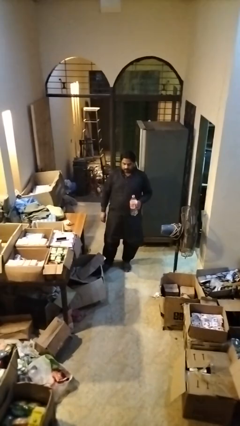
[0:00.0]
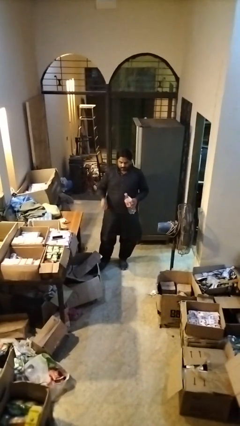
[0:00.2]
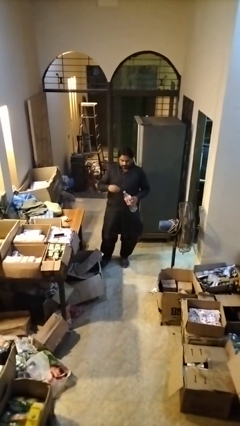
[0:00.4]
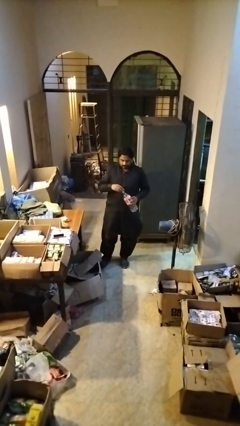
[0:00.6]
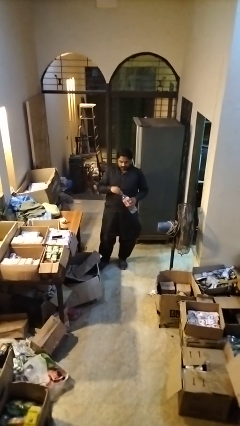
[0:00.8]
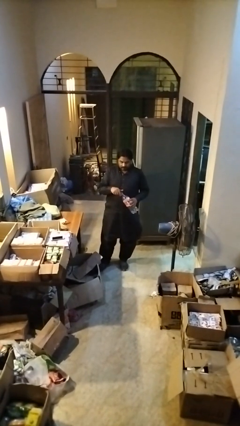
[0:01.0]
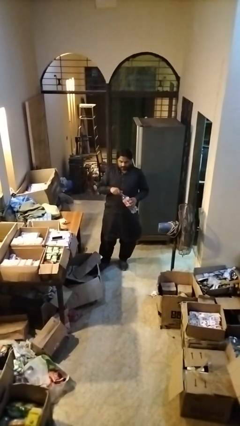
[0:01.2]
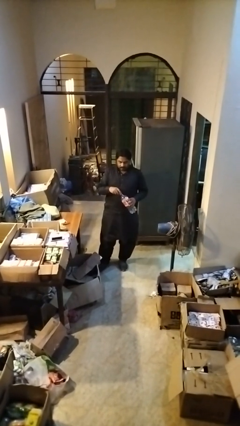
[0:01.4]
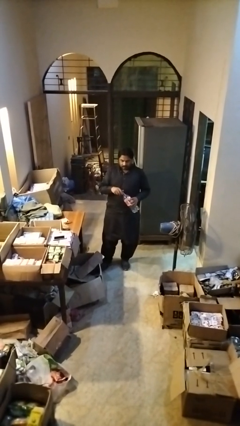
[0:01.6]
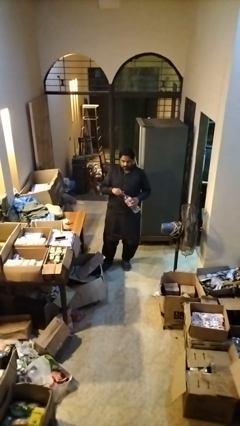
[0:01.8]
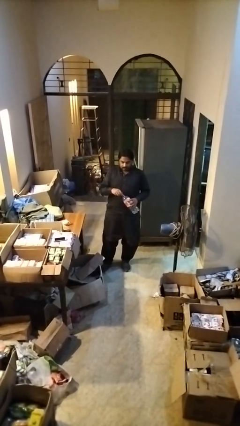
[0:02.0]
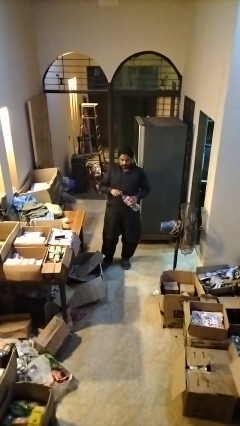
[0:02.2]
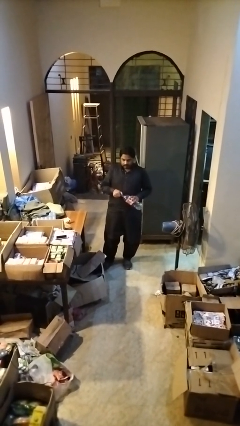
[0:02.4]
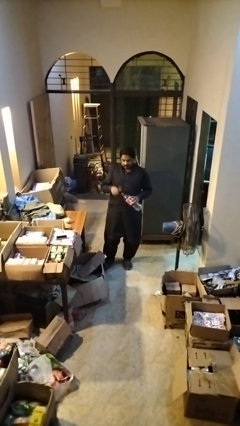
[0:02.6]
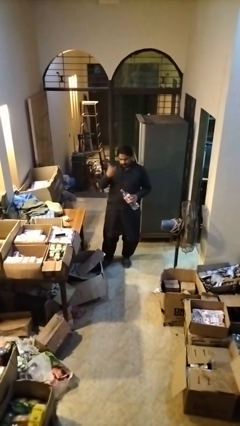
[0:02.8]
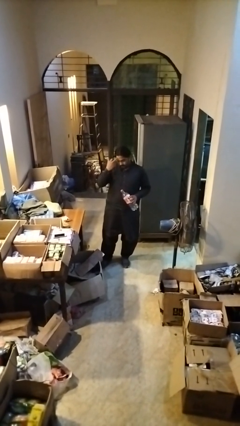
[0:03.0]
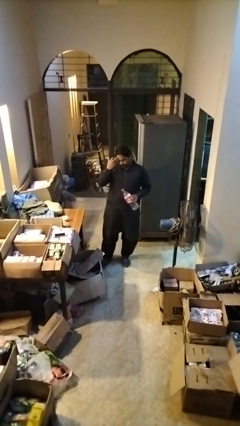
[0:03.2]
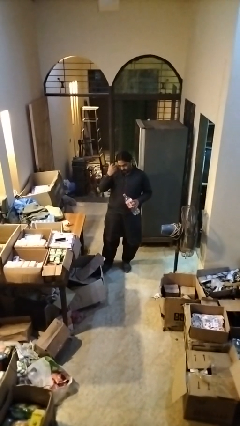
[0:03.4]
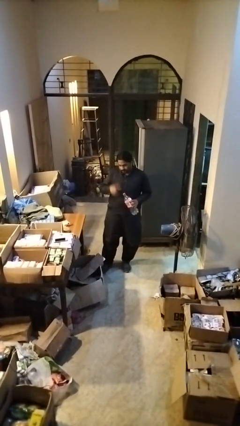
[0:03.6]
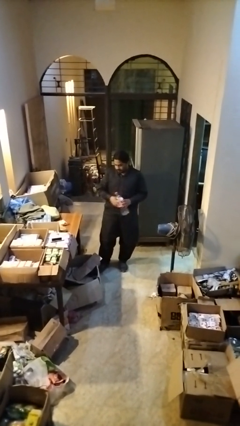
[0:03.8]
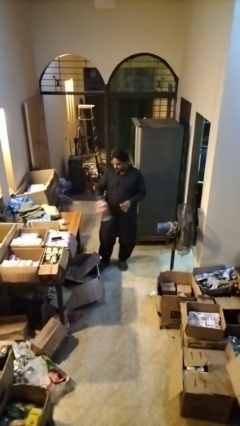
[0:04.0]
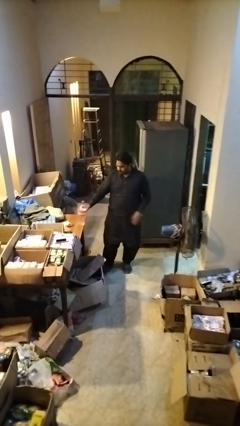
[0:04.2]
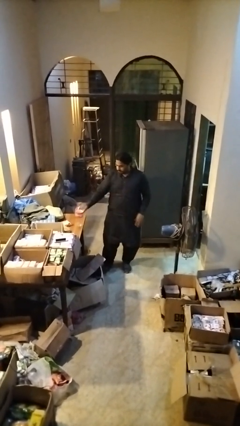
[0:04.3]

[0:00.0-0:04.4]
person screws lid to bottle

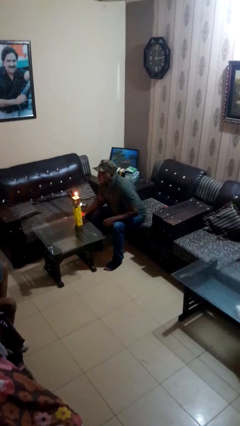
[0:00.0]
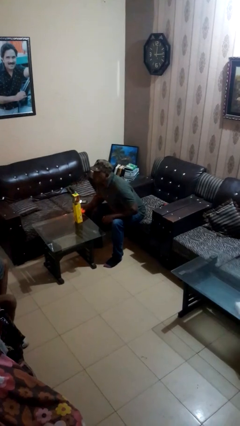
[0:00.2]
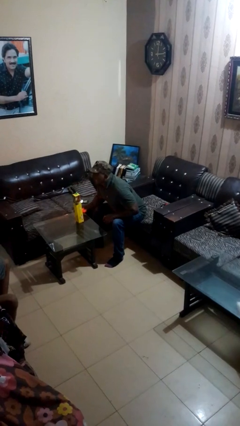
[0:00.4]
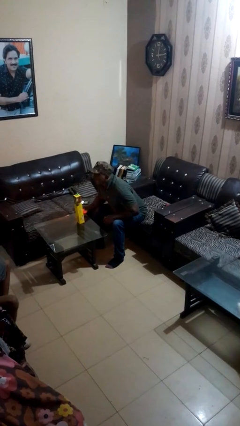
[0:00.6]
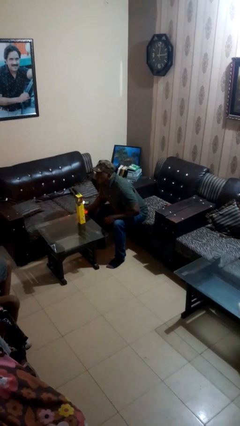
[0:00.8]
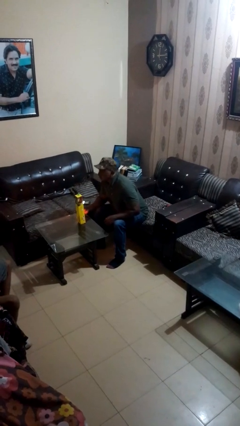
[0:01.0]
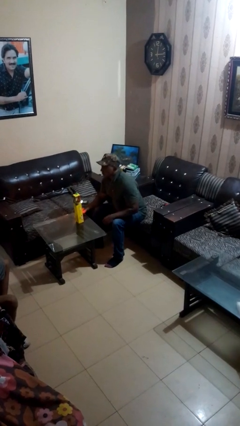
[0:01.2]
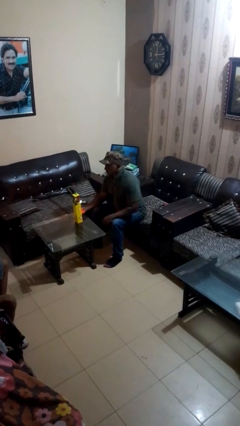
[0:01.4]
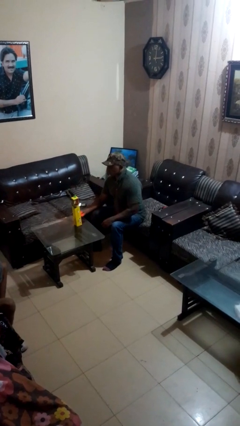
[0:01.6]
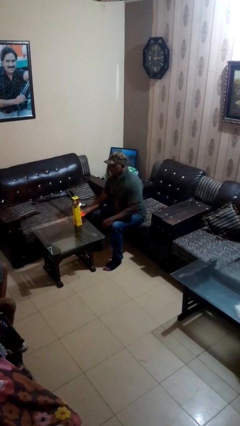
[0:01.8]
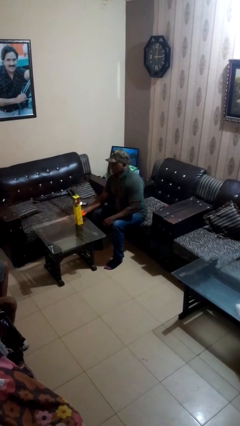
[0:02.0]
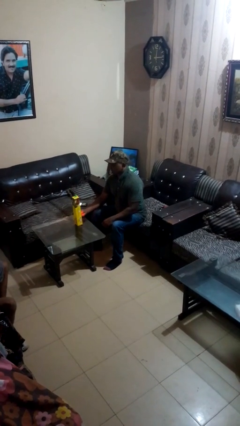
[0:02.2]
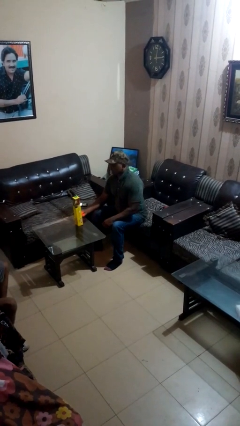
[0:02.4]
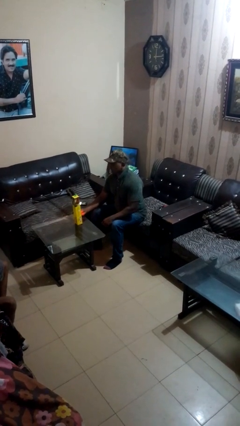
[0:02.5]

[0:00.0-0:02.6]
person extinguishes candle

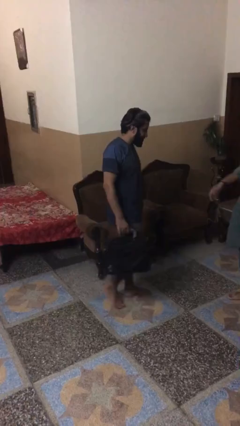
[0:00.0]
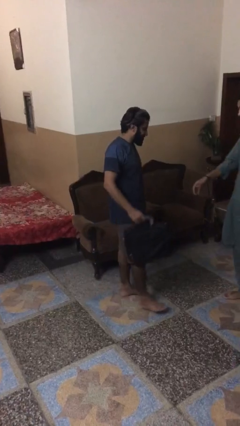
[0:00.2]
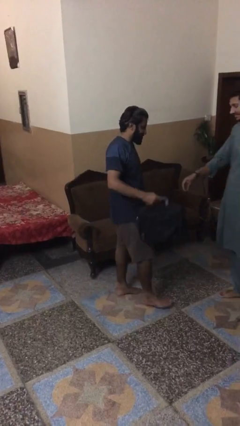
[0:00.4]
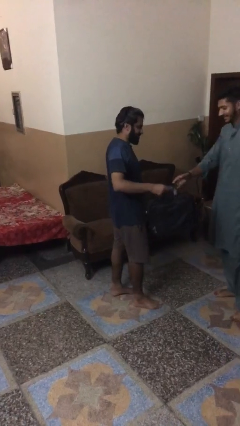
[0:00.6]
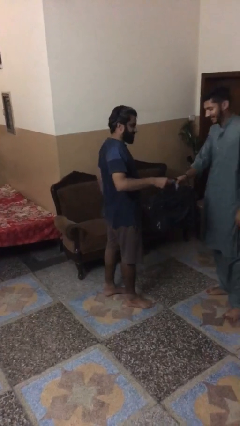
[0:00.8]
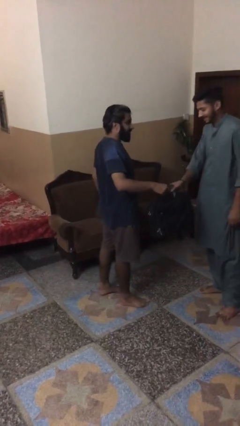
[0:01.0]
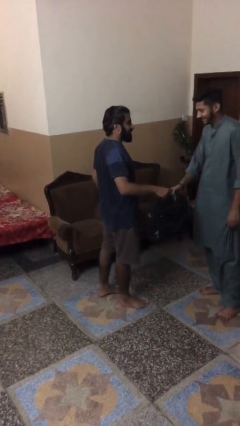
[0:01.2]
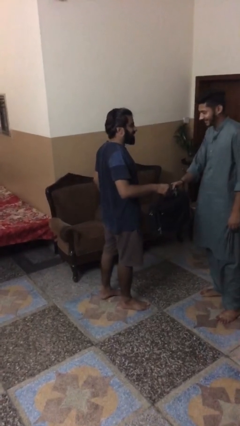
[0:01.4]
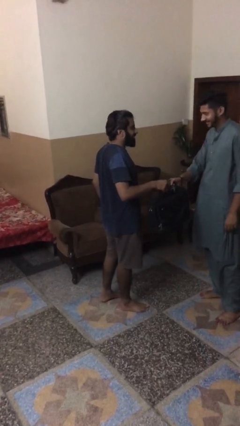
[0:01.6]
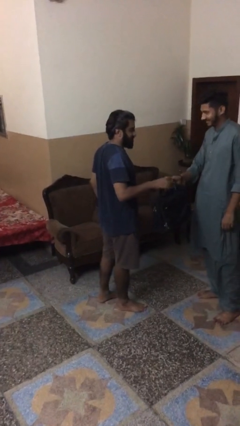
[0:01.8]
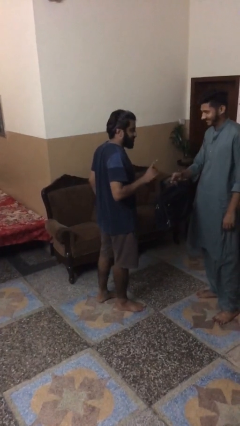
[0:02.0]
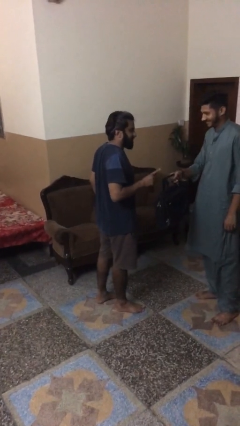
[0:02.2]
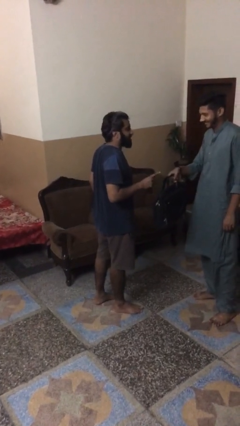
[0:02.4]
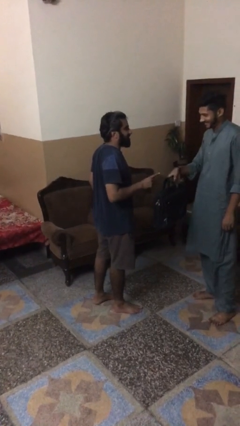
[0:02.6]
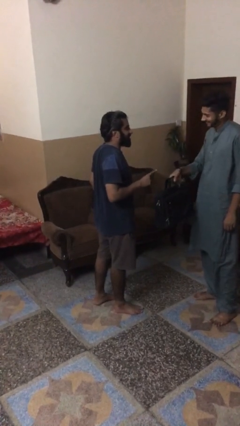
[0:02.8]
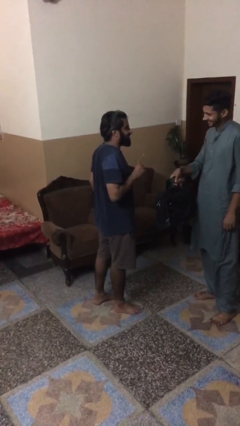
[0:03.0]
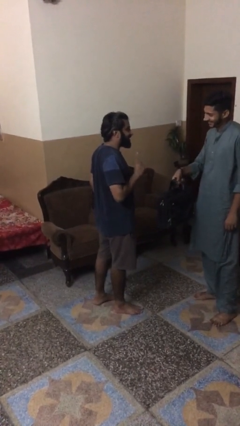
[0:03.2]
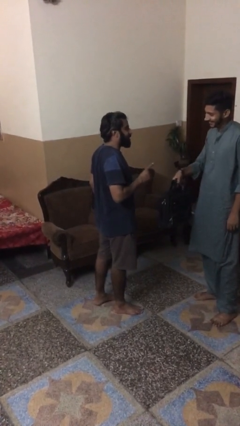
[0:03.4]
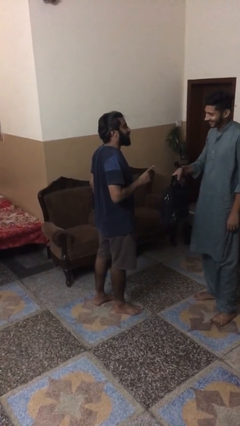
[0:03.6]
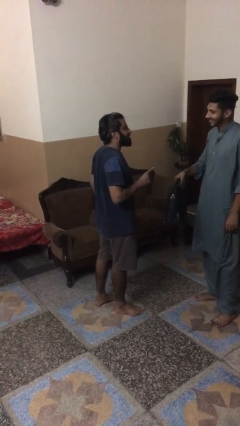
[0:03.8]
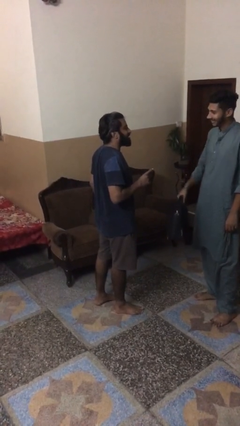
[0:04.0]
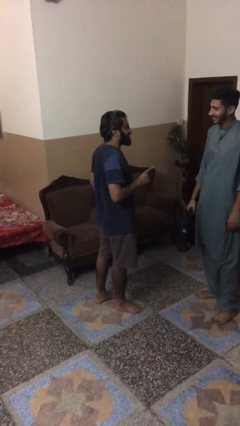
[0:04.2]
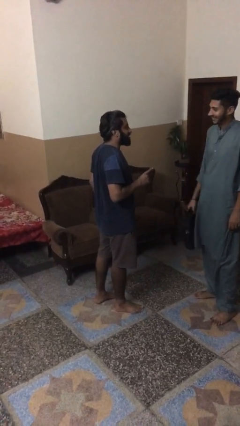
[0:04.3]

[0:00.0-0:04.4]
person transfers object to person

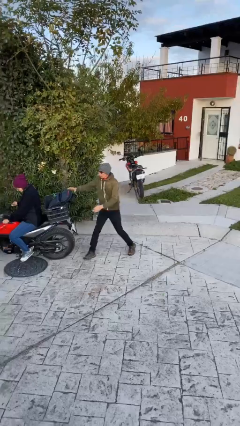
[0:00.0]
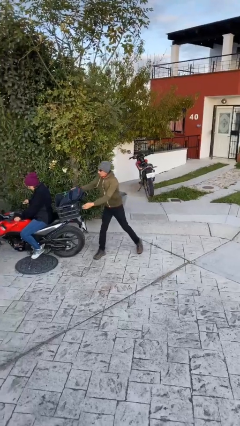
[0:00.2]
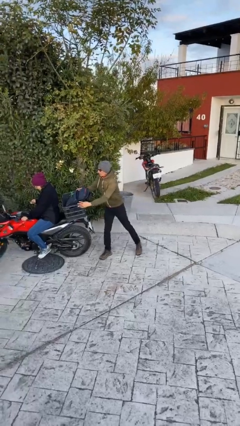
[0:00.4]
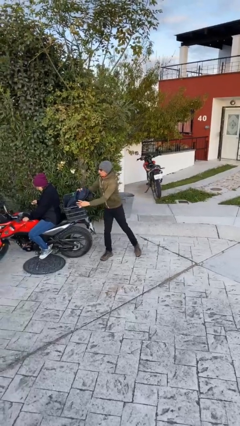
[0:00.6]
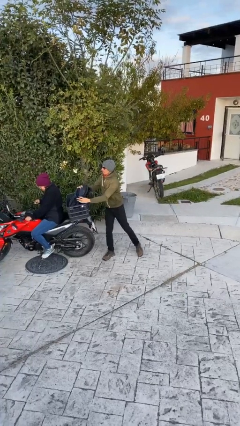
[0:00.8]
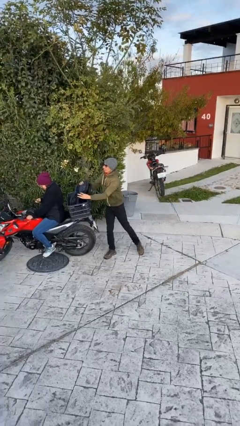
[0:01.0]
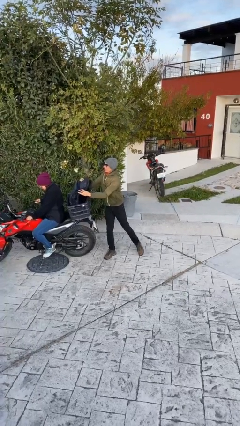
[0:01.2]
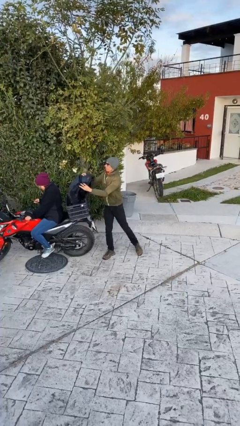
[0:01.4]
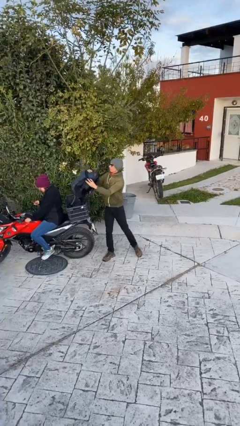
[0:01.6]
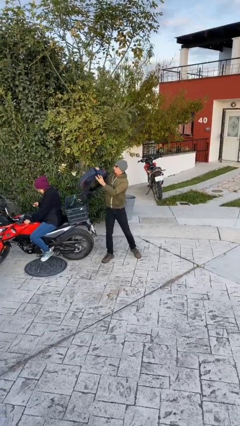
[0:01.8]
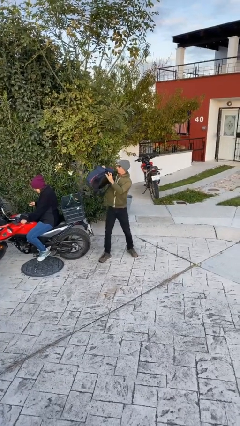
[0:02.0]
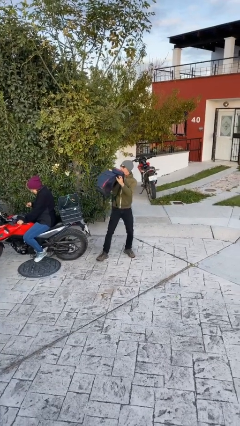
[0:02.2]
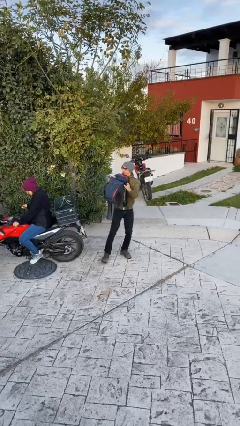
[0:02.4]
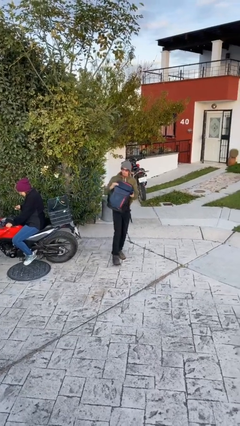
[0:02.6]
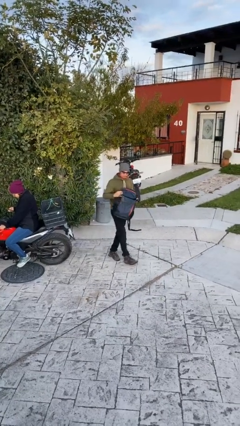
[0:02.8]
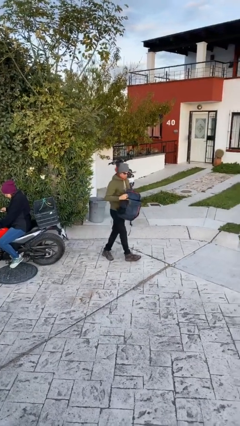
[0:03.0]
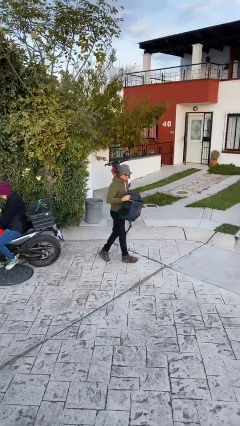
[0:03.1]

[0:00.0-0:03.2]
person steals object from person

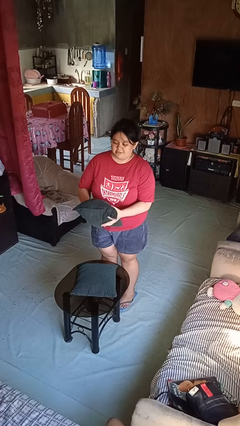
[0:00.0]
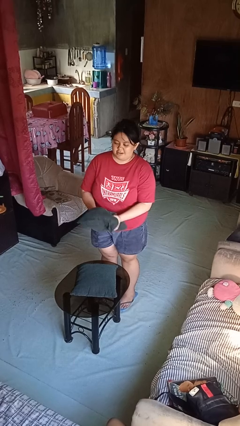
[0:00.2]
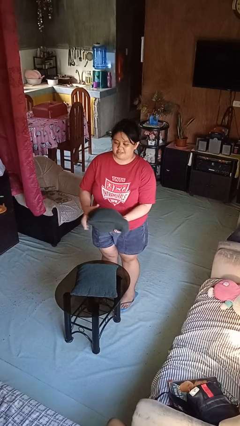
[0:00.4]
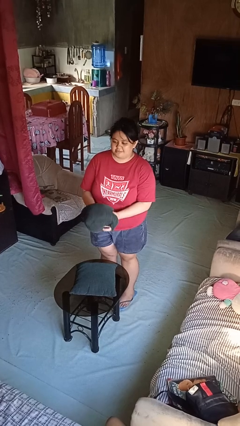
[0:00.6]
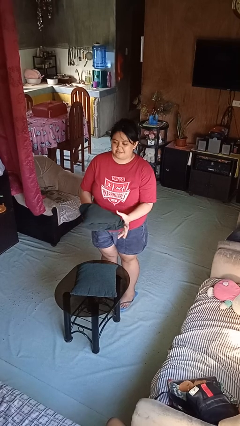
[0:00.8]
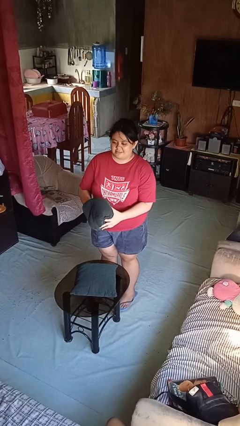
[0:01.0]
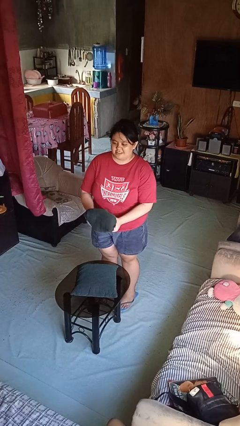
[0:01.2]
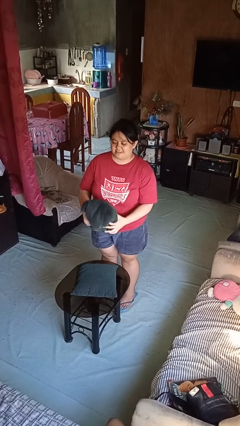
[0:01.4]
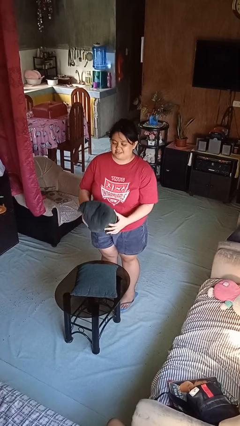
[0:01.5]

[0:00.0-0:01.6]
person squeezes object

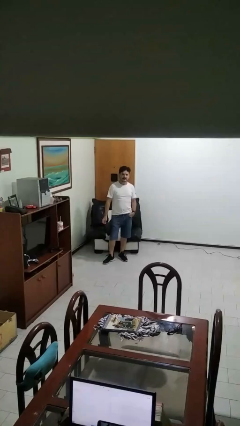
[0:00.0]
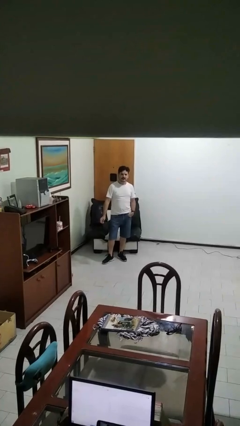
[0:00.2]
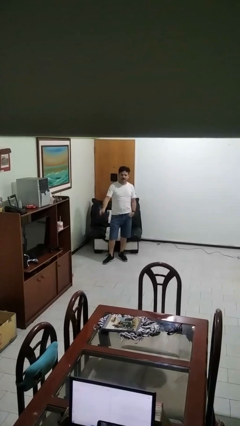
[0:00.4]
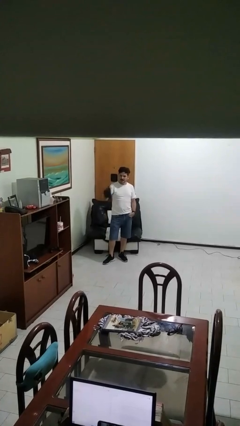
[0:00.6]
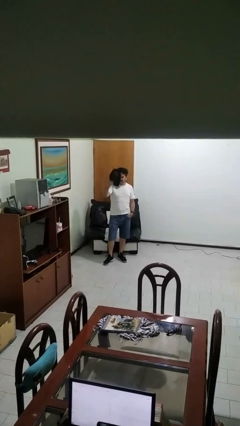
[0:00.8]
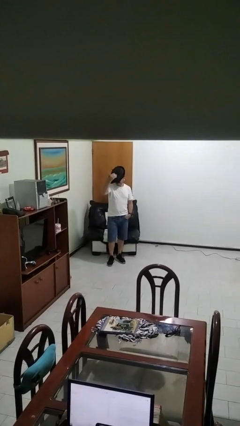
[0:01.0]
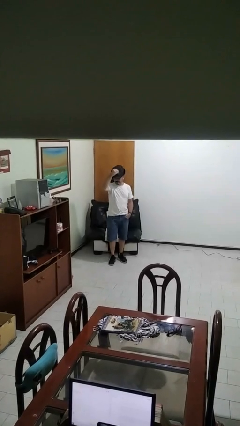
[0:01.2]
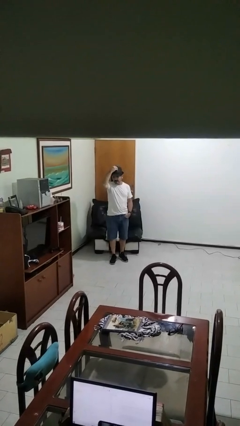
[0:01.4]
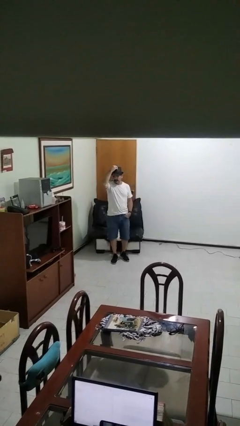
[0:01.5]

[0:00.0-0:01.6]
person puts on hat
